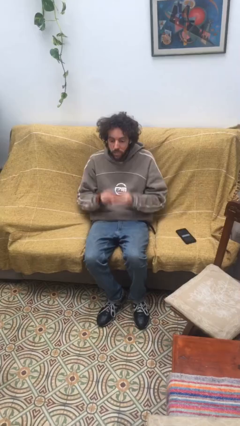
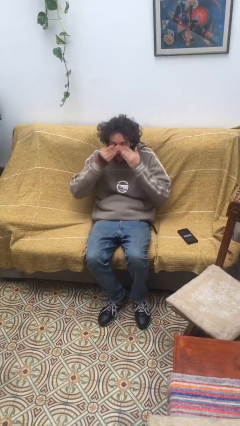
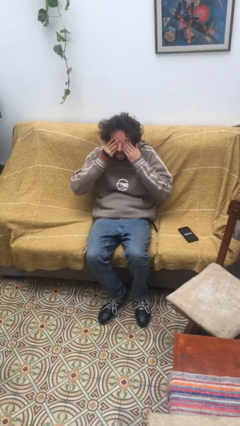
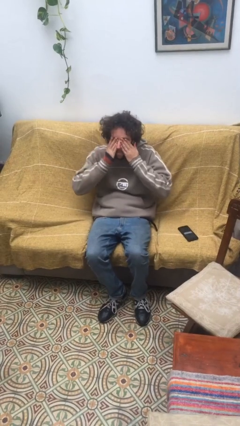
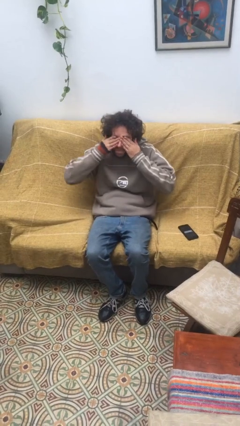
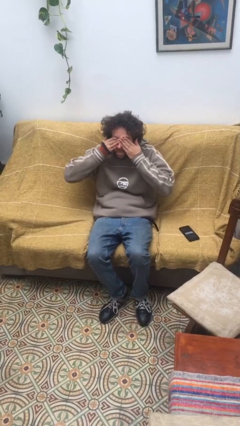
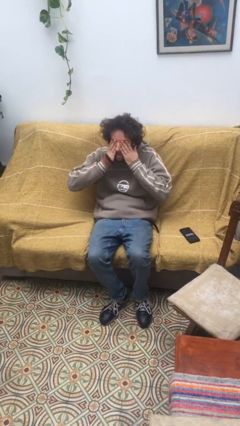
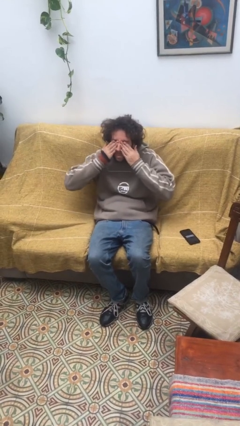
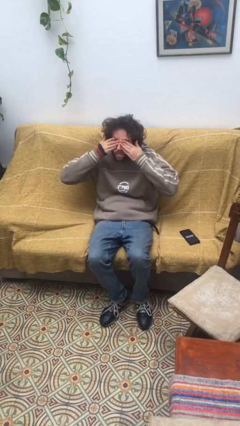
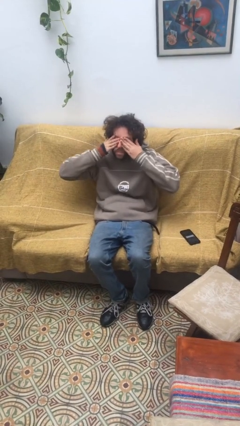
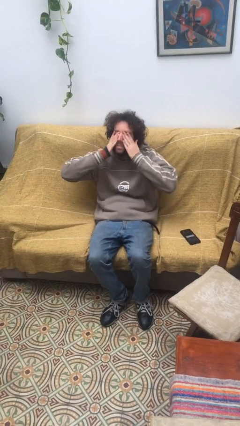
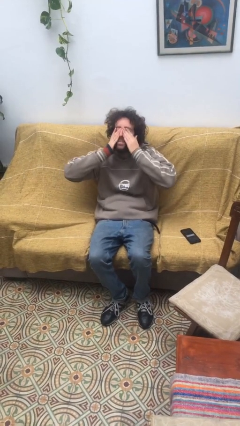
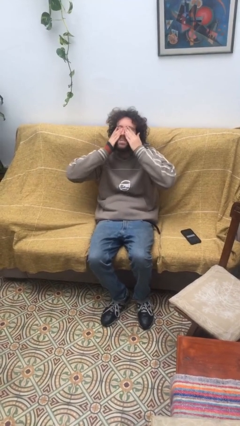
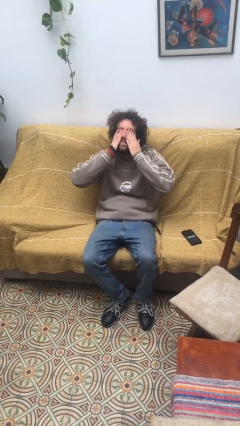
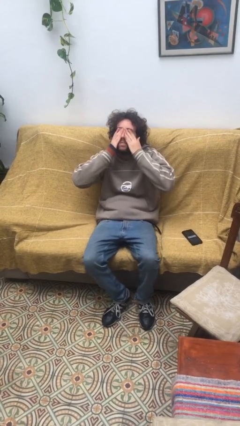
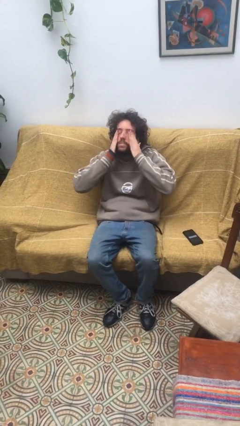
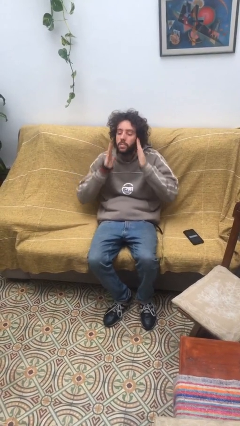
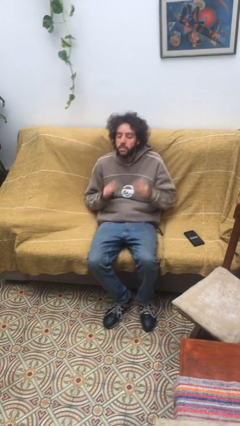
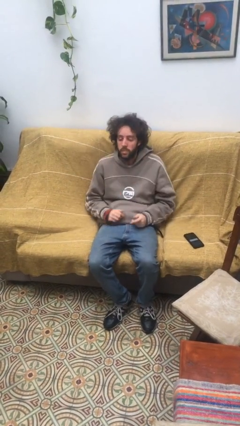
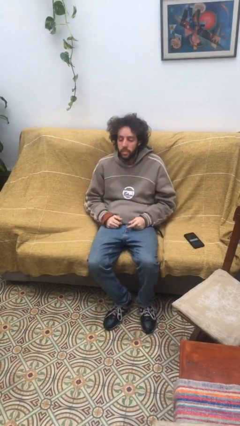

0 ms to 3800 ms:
person rubs eyes

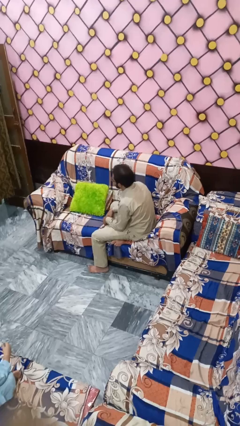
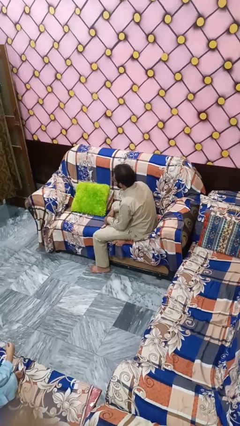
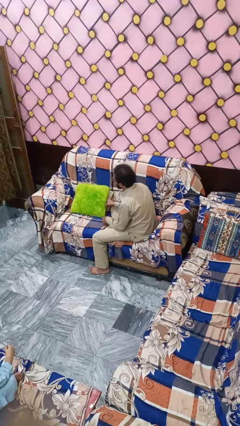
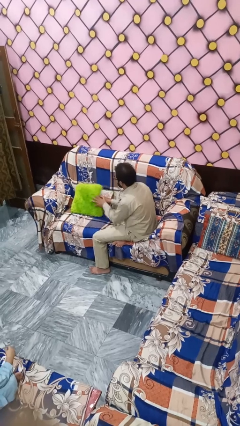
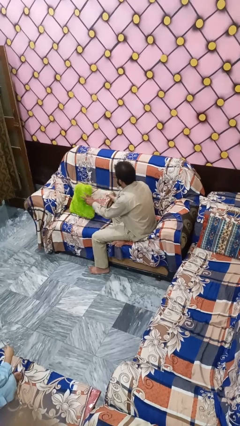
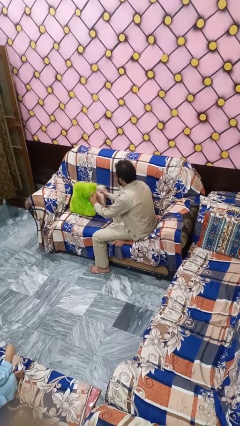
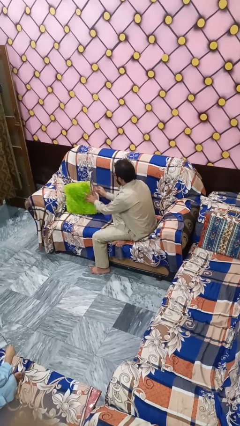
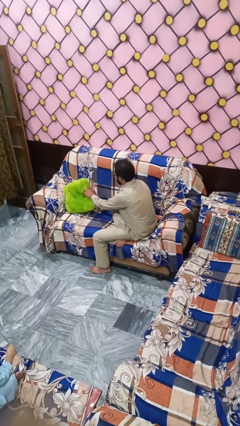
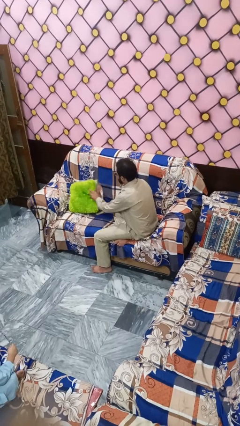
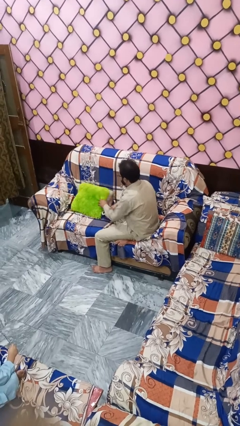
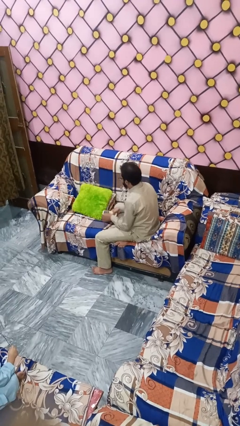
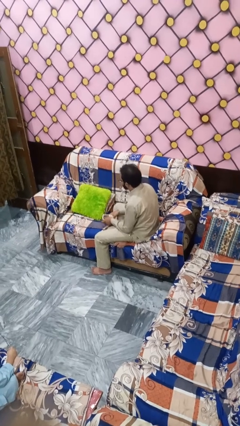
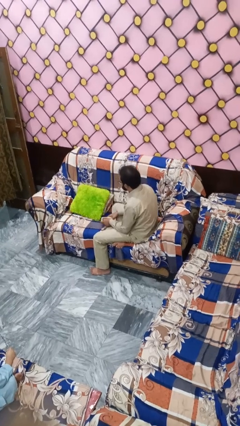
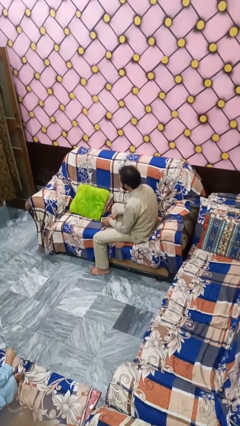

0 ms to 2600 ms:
person searches in couch

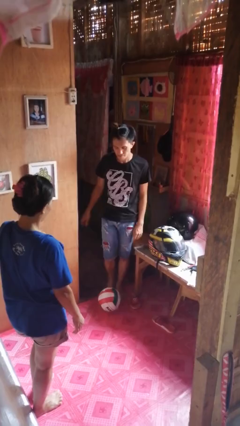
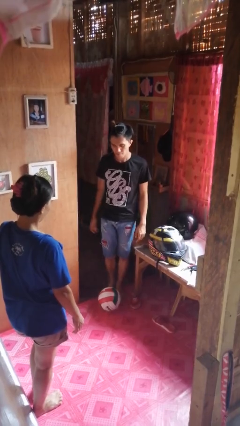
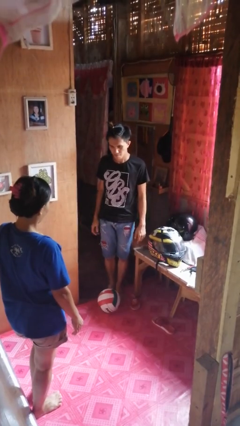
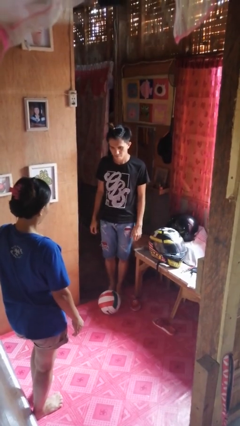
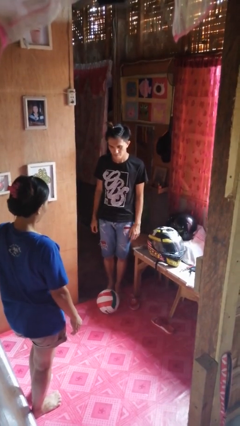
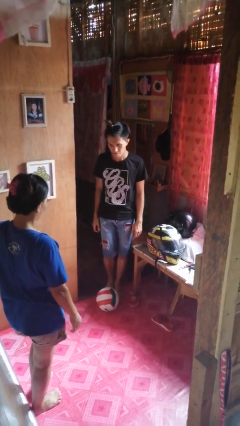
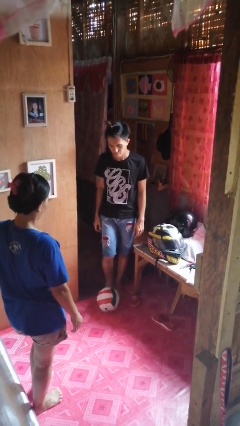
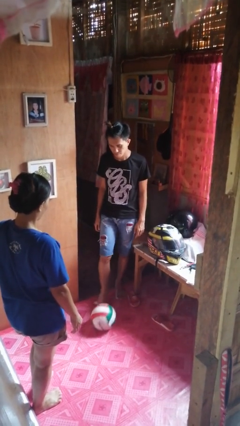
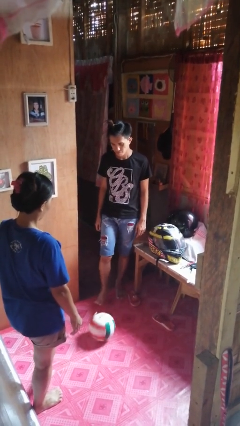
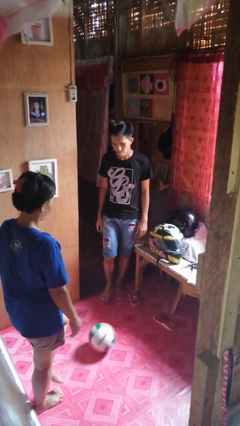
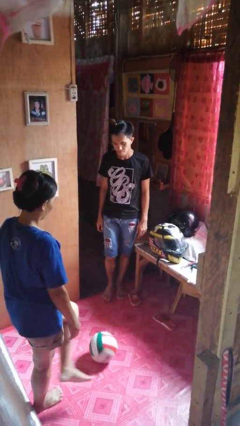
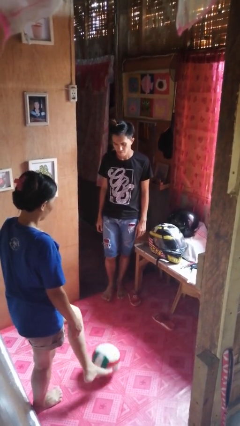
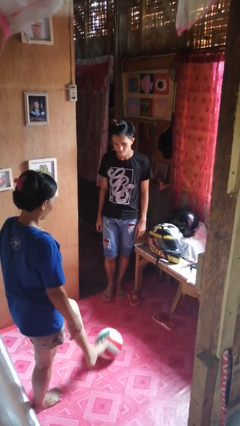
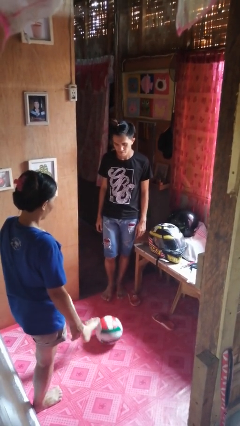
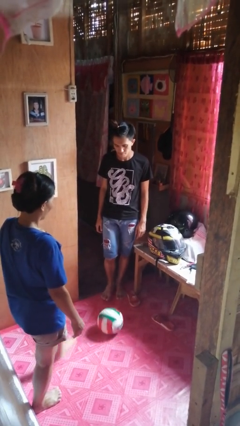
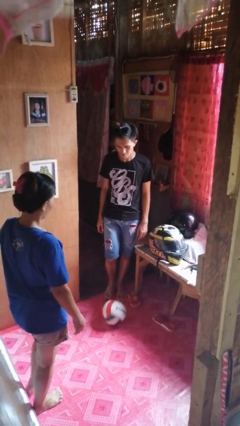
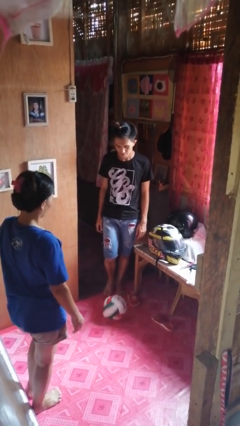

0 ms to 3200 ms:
person kicks object to person

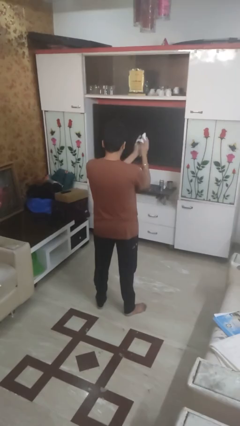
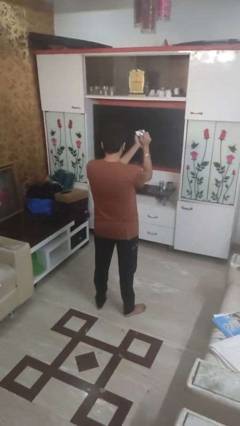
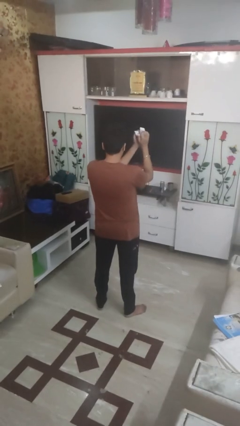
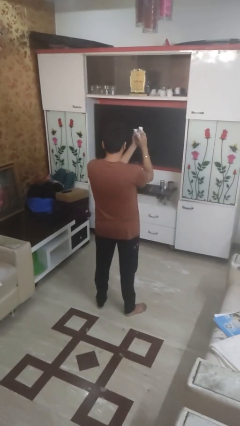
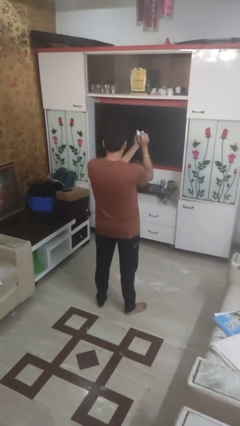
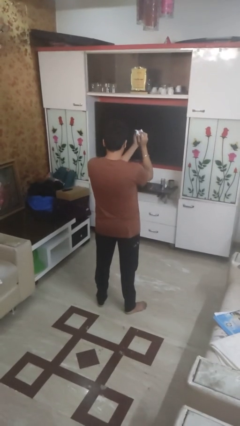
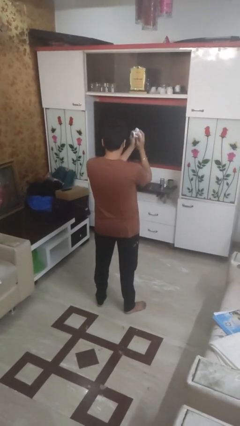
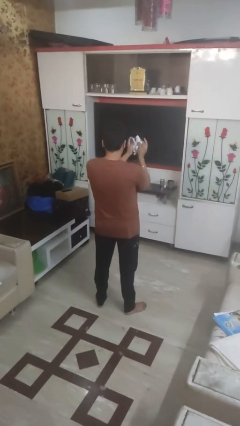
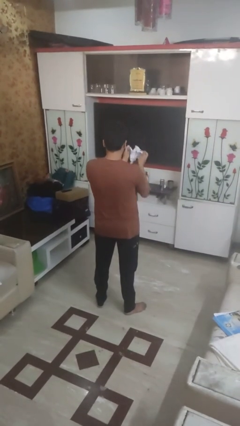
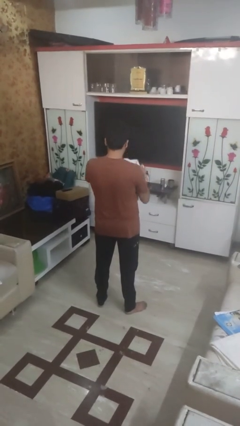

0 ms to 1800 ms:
person crumples paper

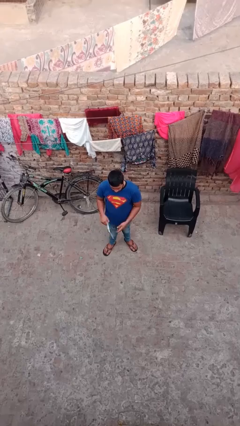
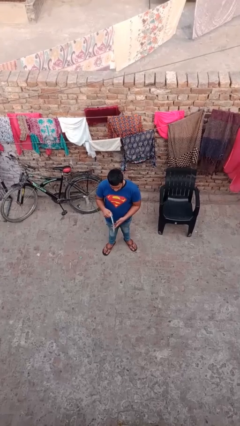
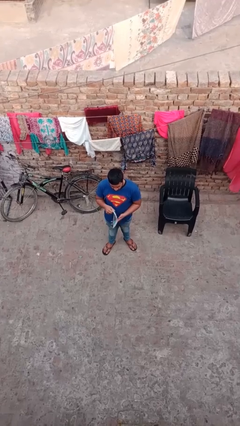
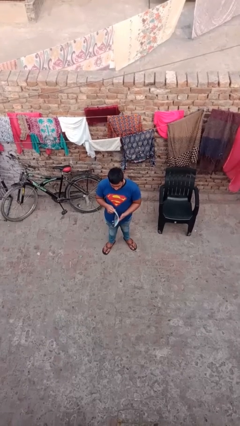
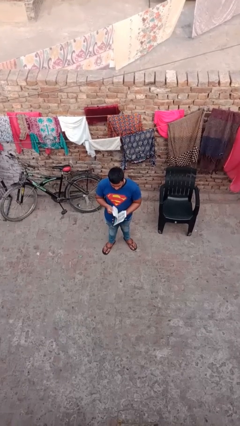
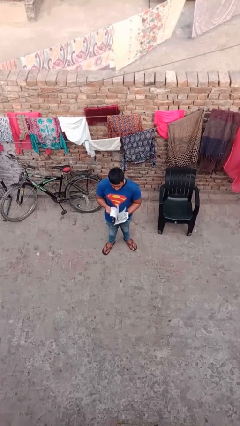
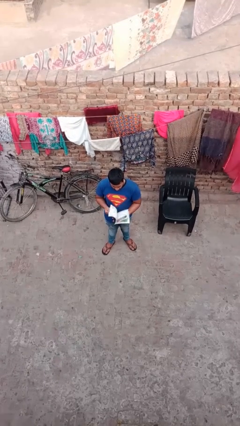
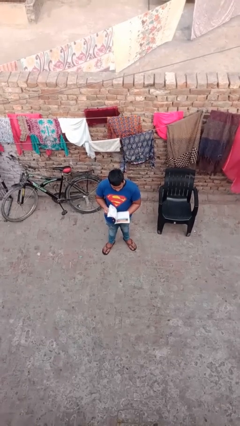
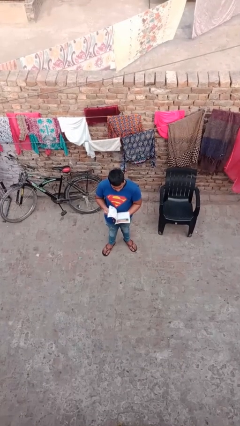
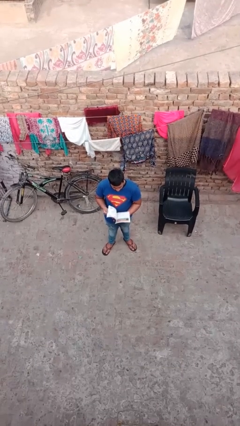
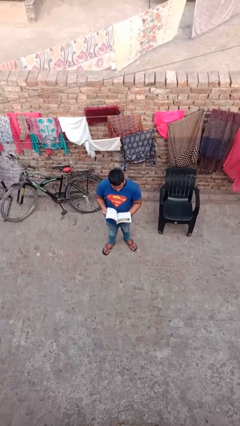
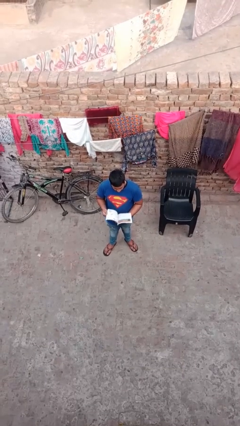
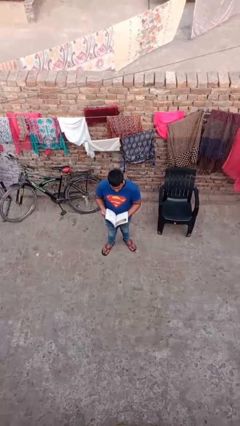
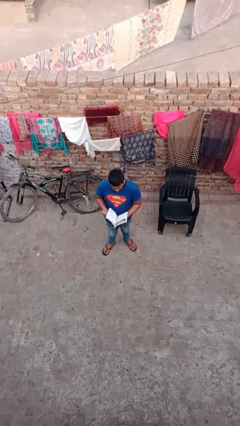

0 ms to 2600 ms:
person reads document

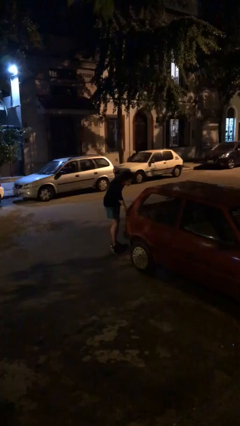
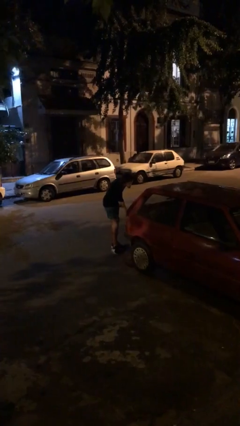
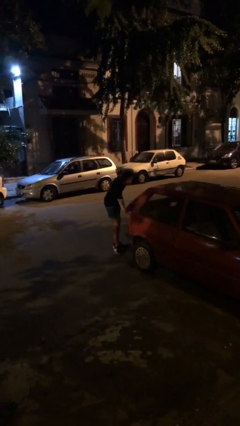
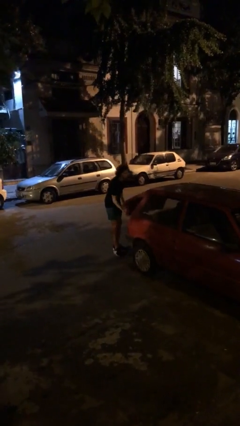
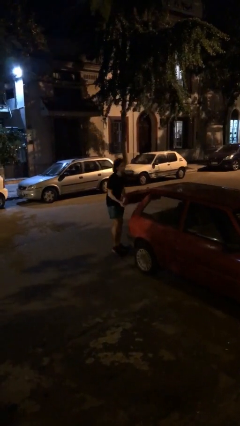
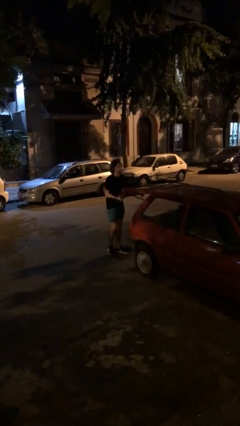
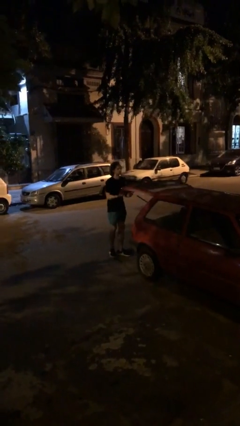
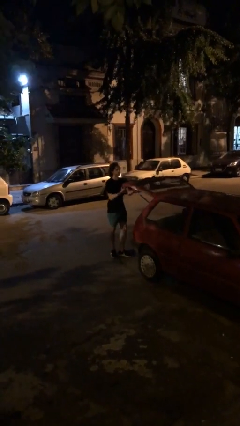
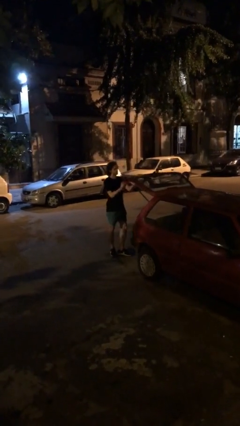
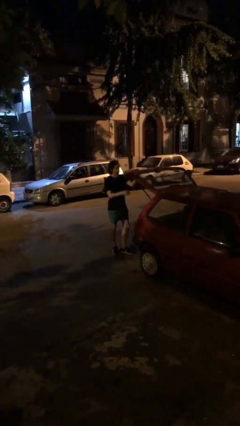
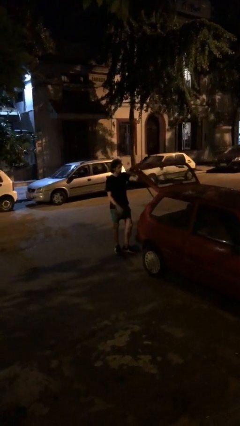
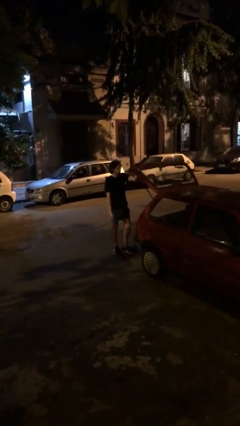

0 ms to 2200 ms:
person opens car trunk

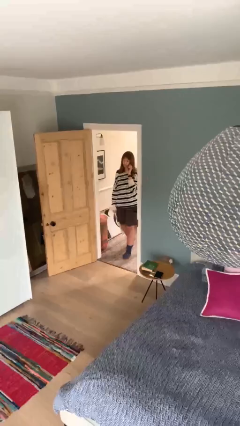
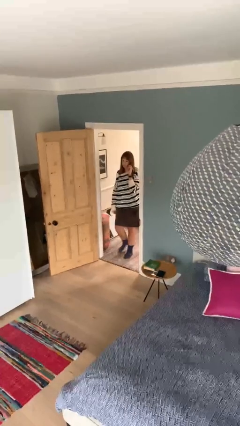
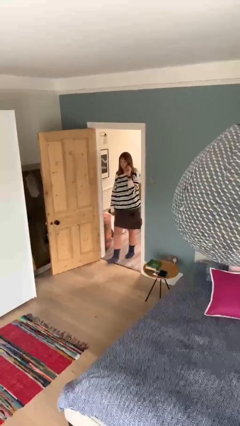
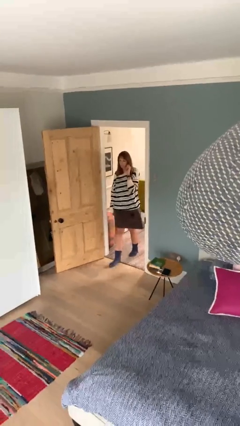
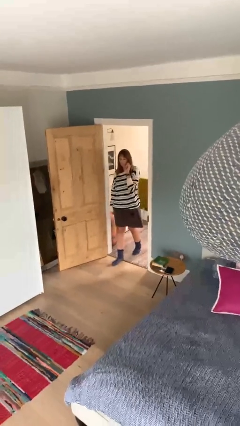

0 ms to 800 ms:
person enters scene through structure
